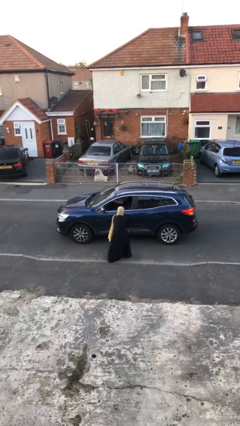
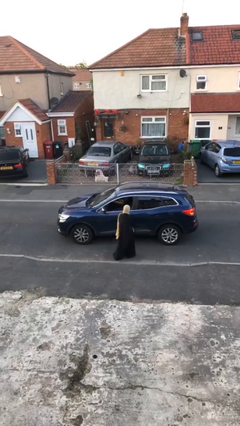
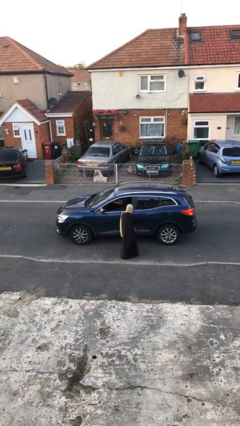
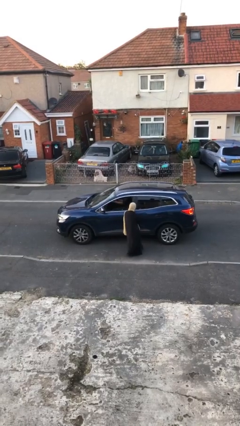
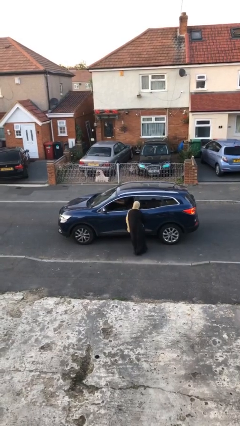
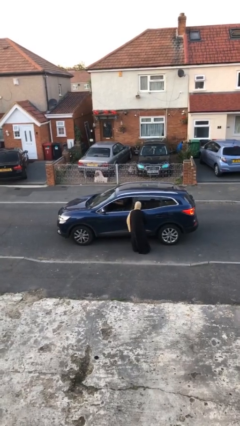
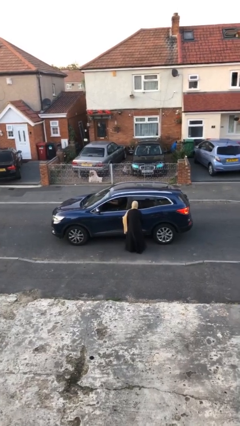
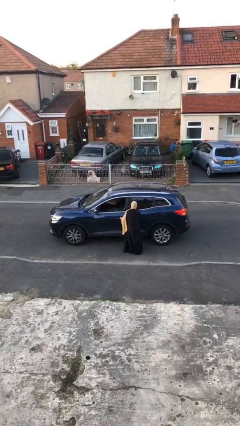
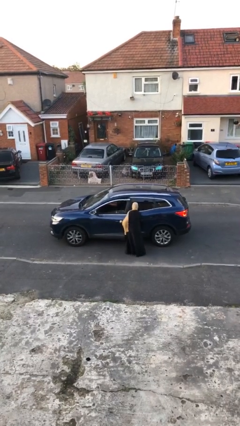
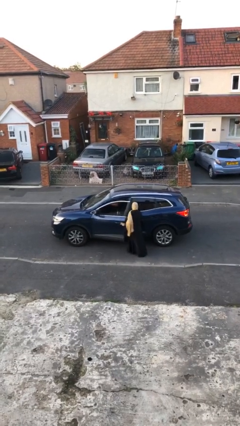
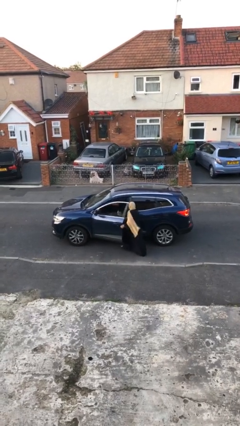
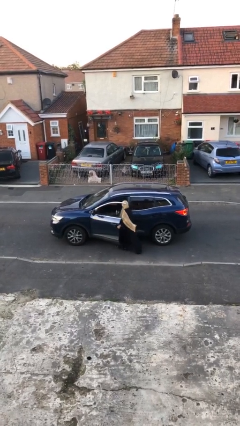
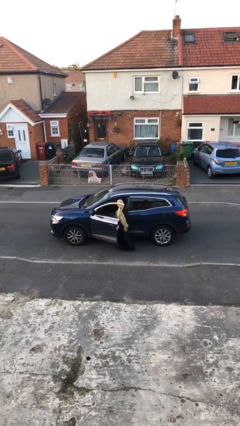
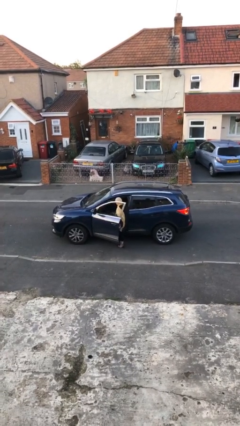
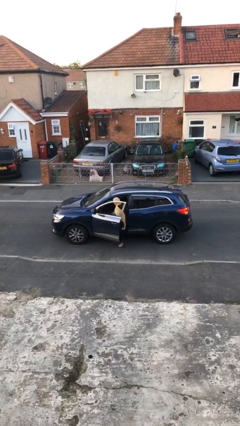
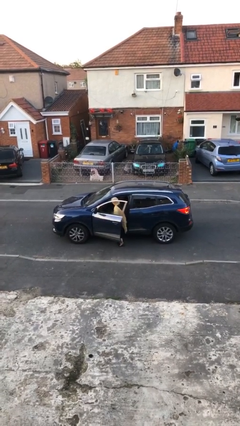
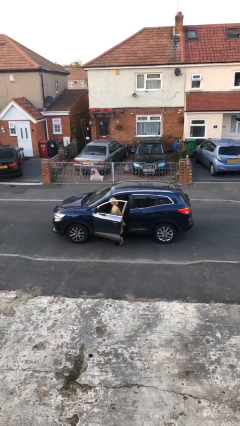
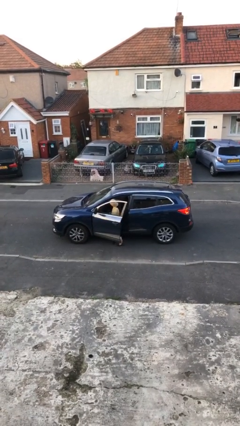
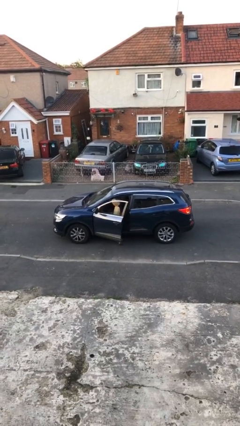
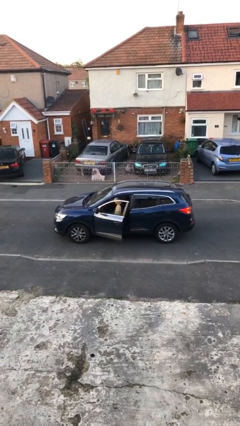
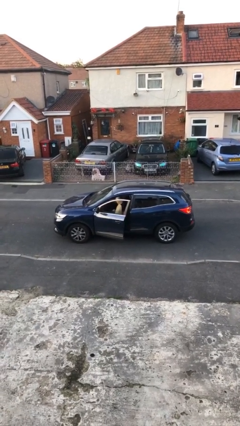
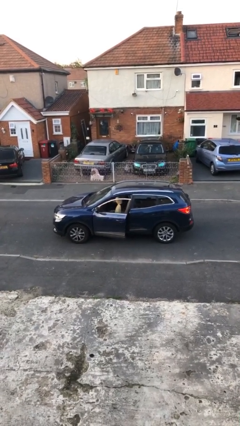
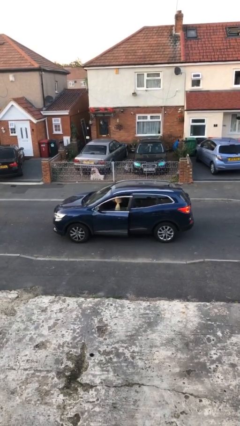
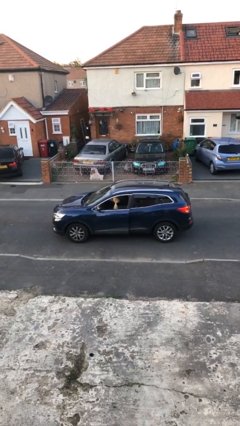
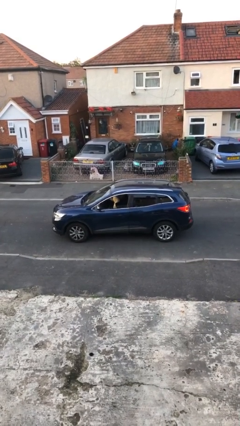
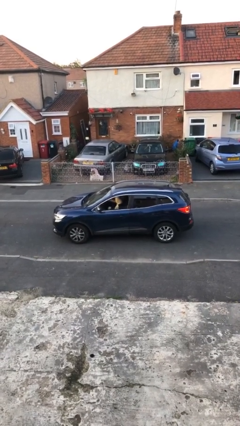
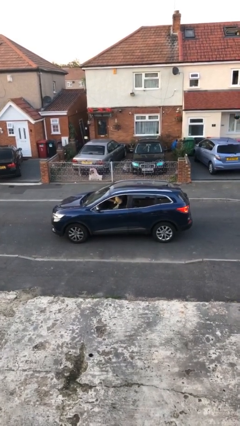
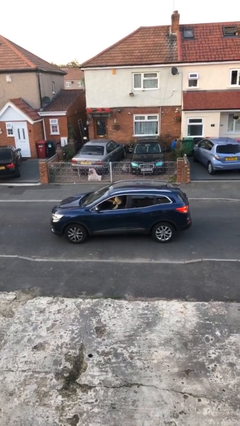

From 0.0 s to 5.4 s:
car picks up person

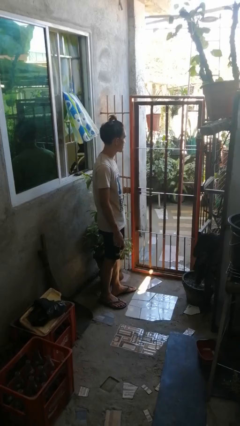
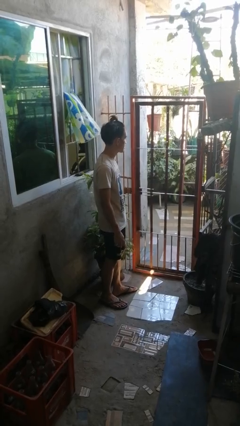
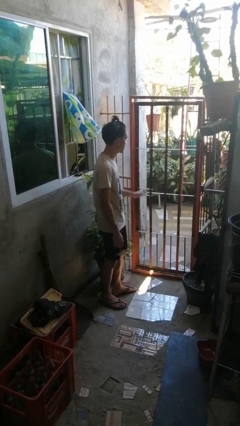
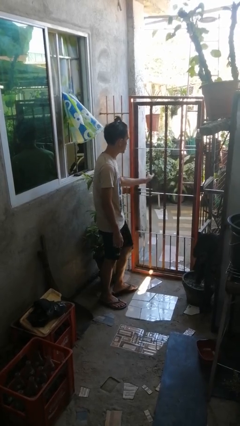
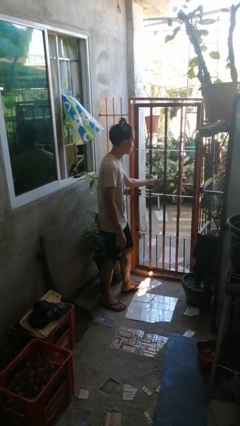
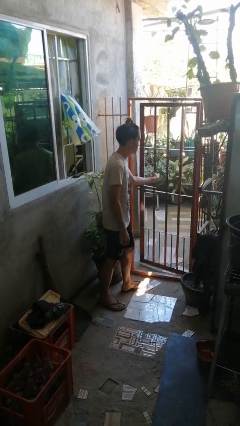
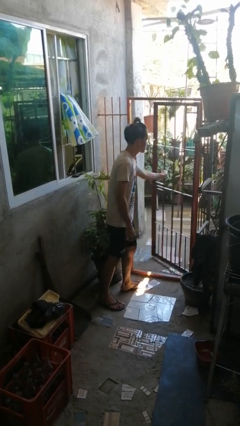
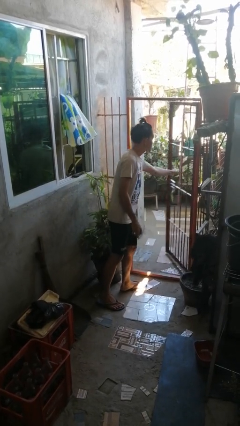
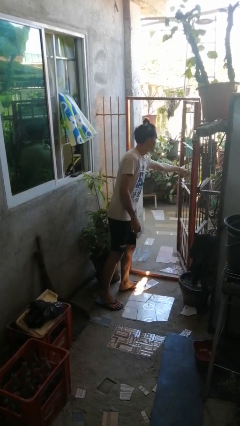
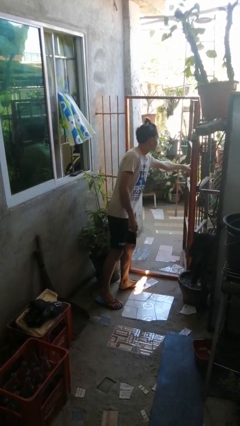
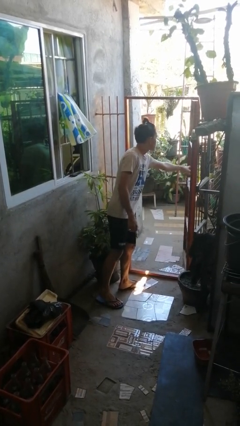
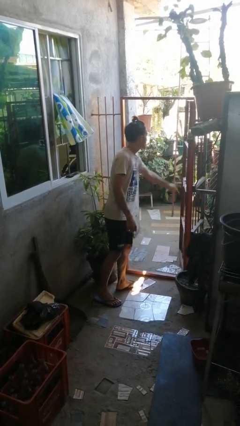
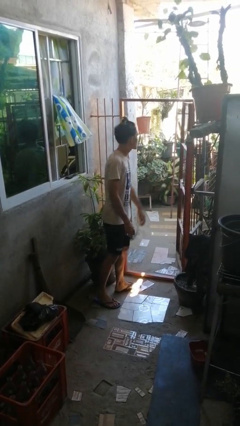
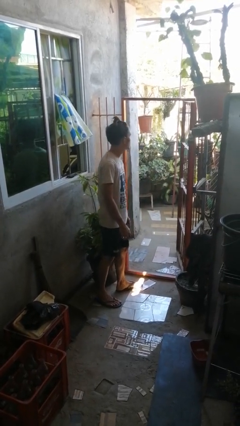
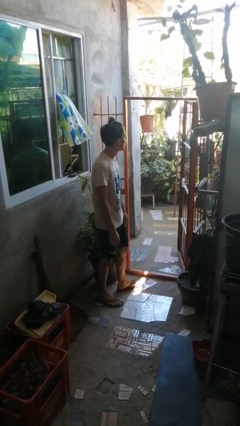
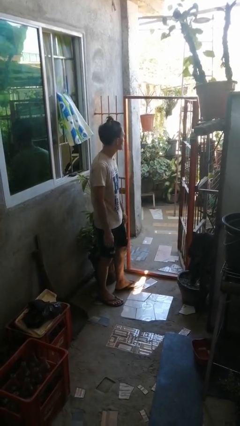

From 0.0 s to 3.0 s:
person opens gate

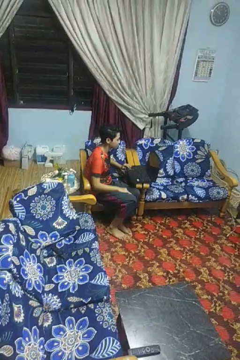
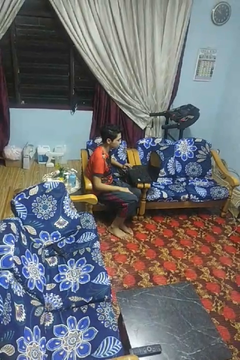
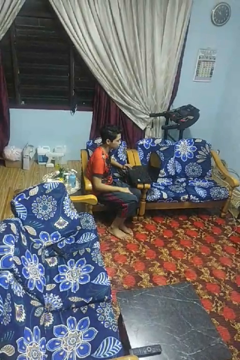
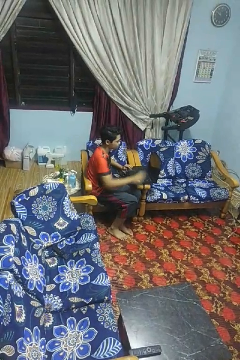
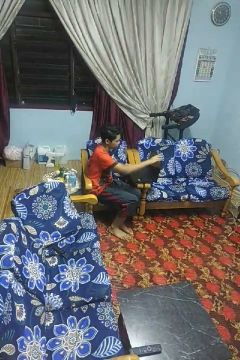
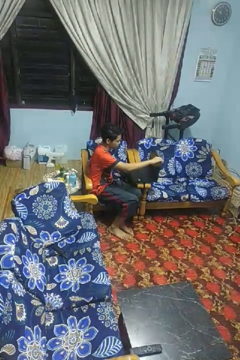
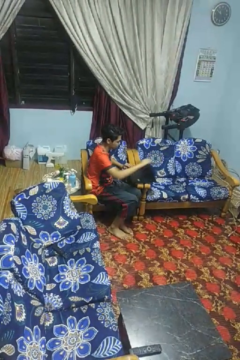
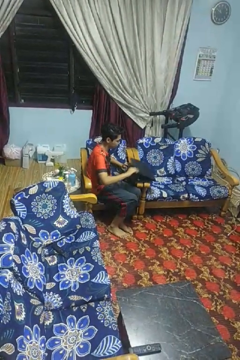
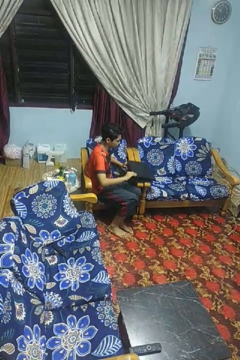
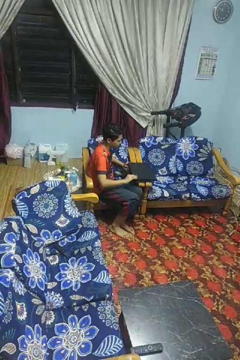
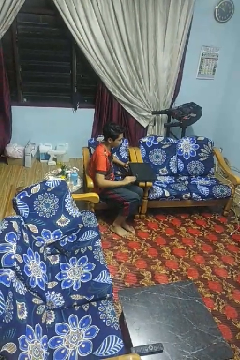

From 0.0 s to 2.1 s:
person closes laptop

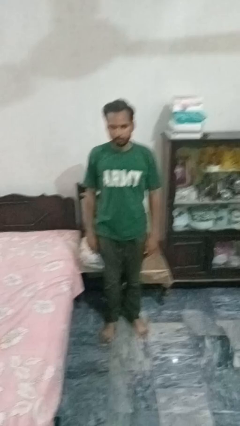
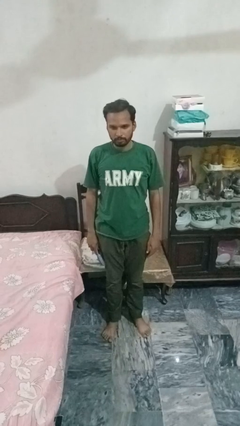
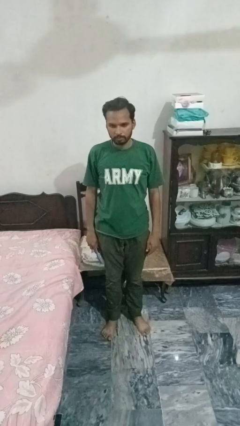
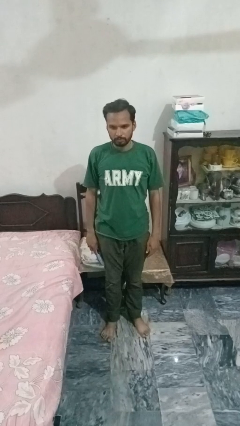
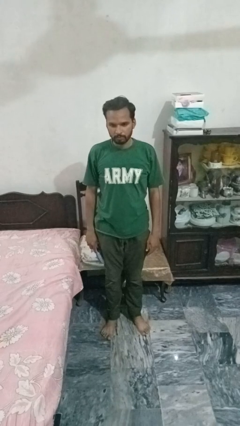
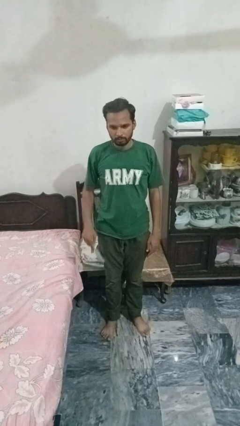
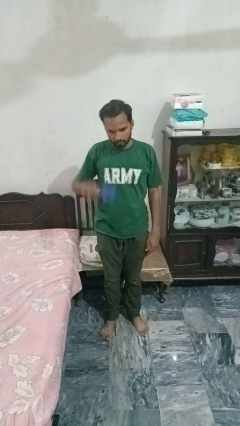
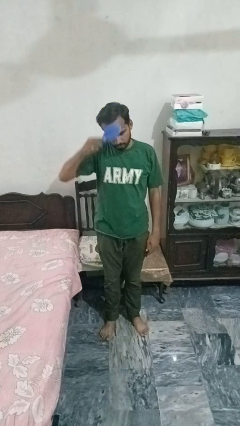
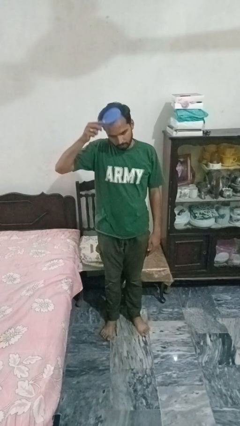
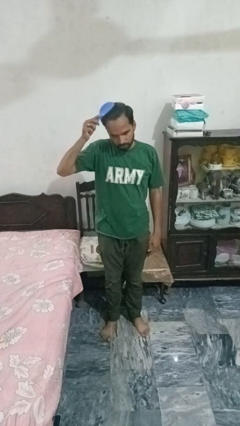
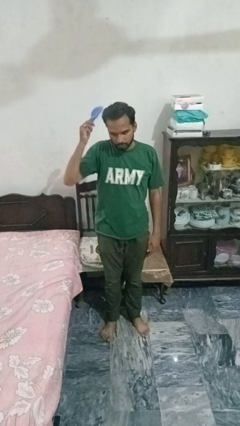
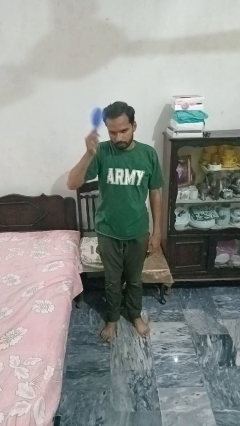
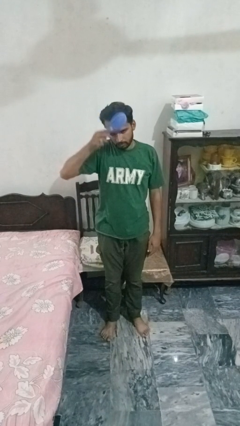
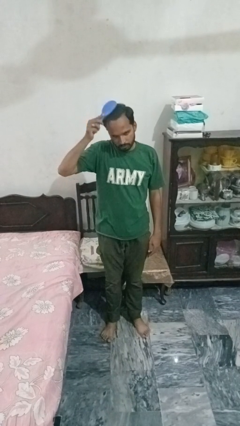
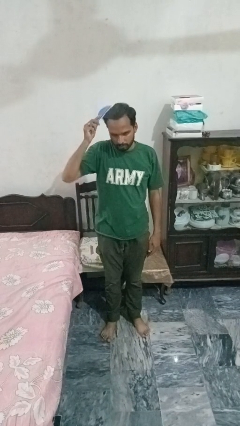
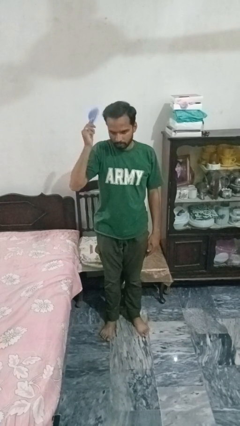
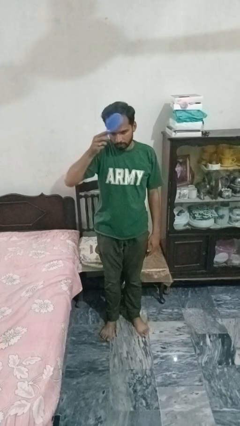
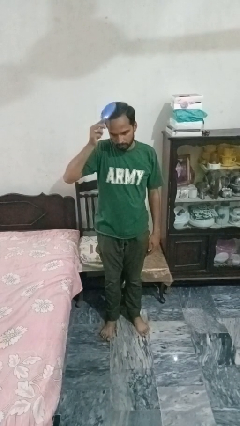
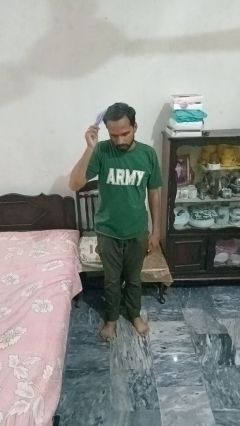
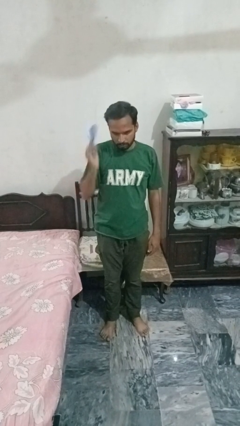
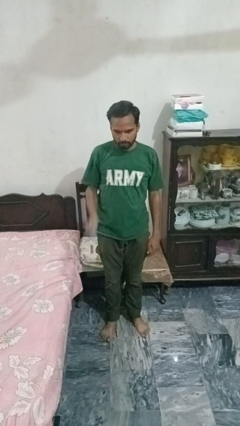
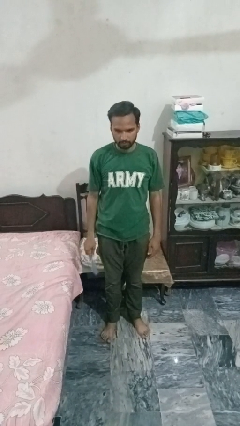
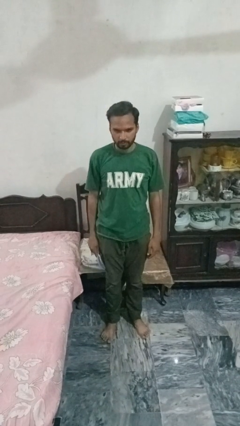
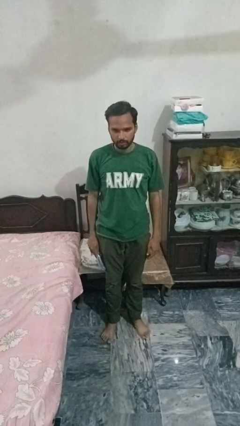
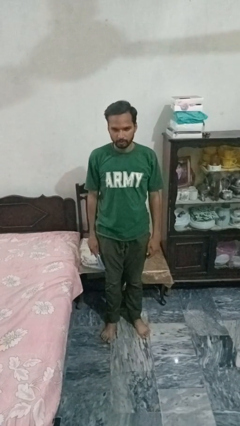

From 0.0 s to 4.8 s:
person brushes hair

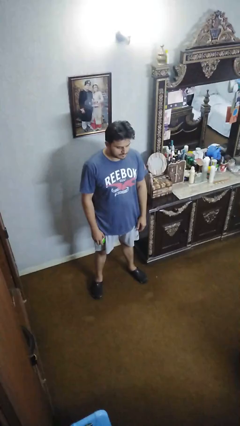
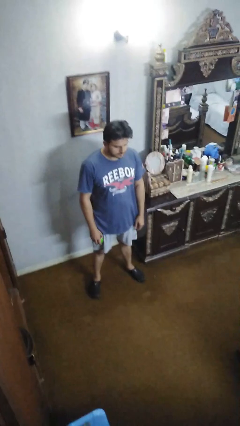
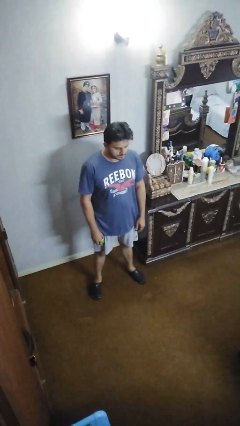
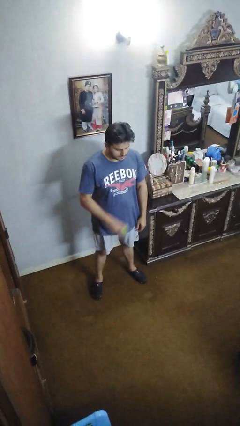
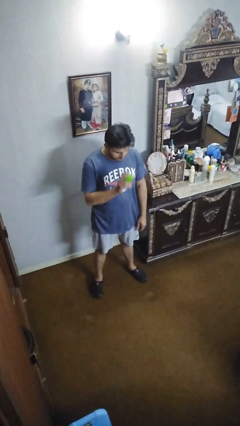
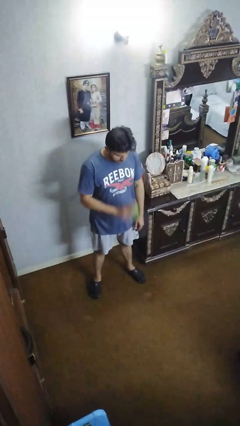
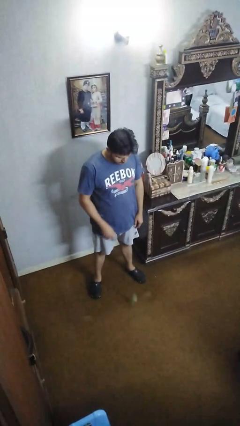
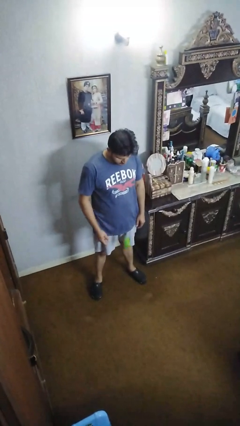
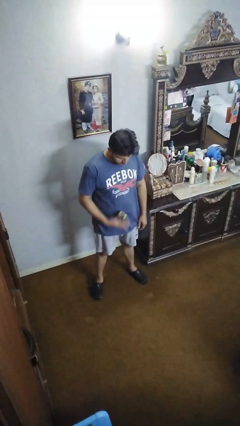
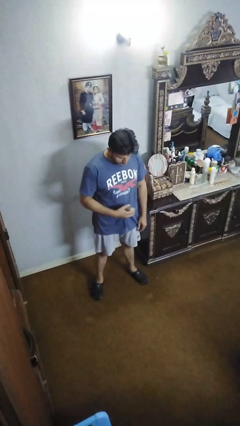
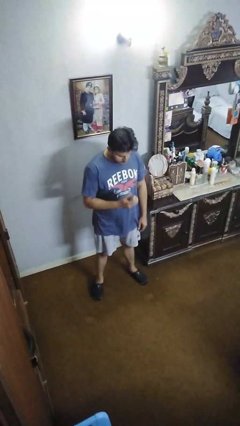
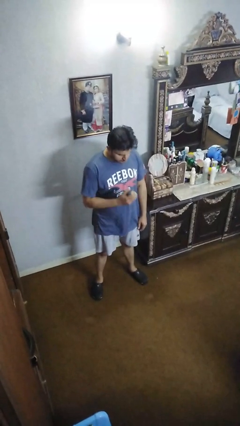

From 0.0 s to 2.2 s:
person bounces ball on floor

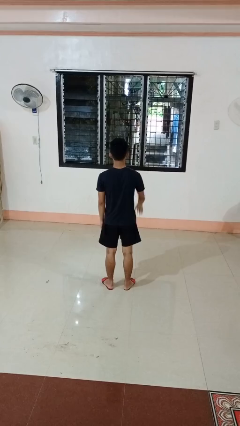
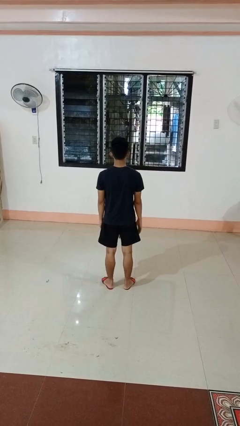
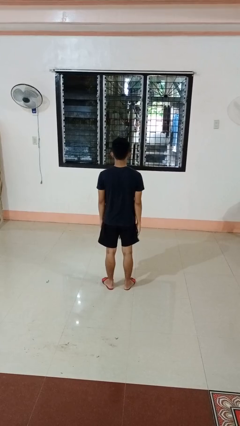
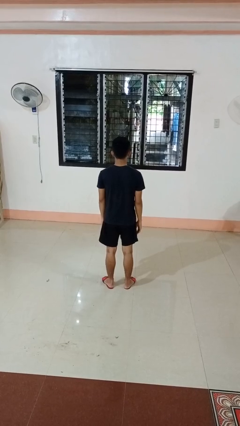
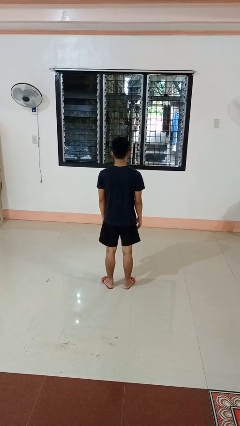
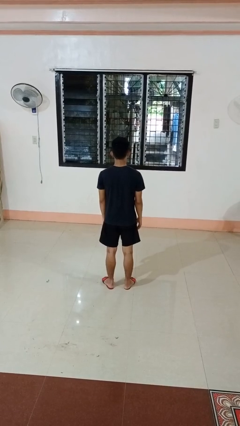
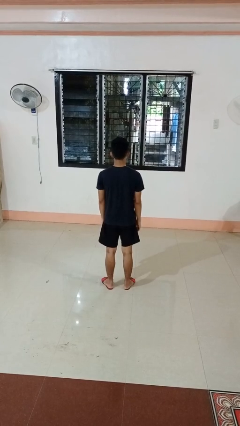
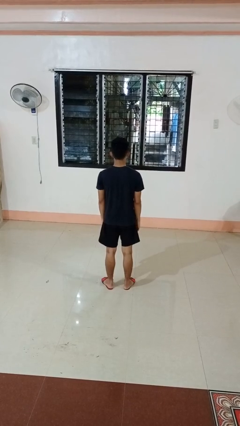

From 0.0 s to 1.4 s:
person gestures swipe down
